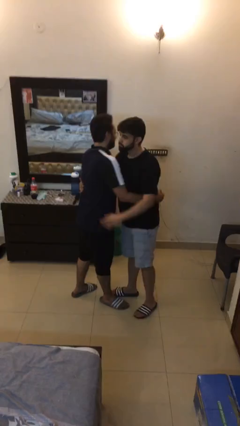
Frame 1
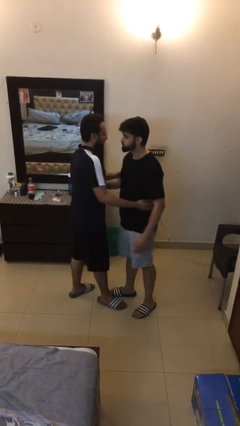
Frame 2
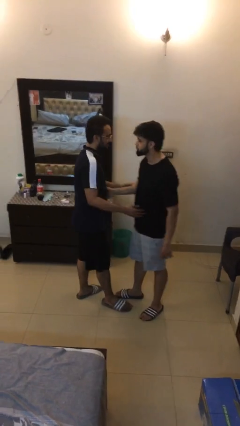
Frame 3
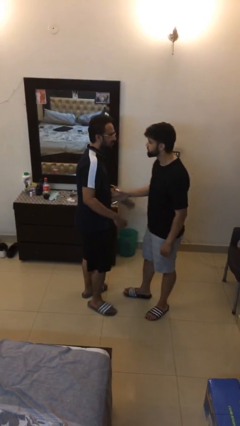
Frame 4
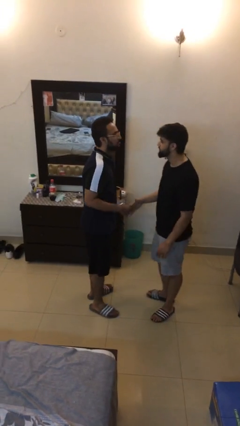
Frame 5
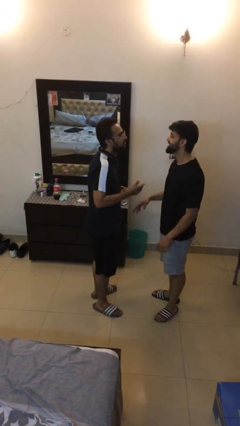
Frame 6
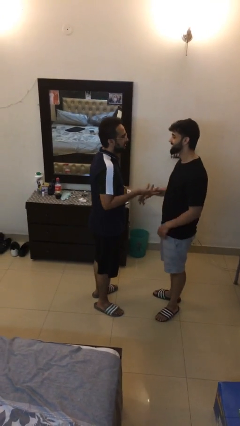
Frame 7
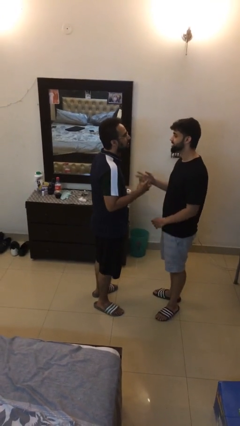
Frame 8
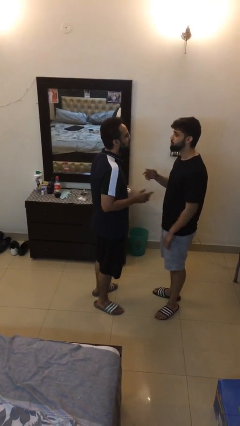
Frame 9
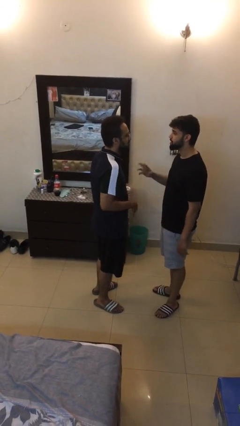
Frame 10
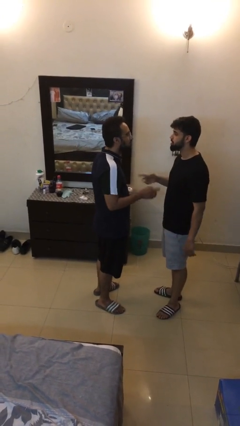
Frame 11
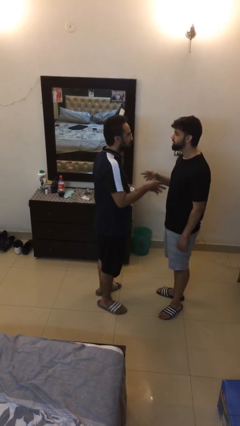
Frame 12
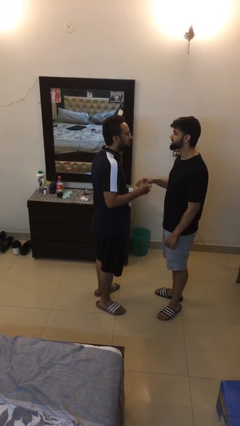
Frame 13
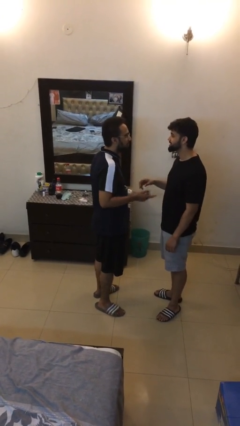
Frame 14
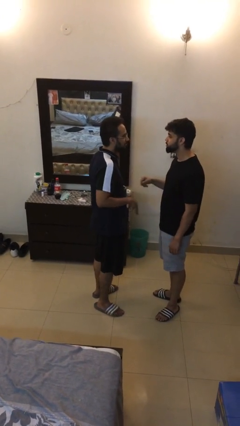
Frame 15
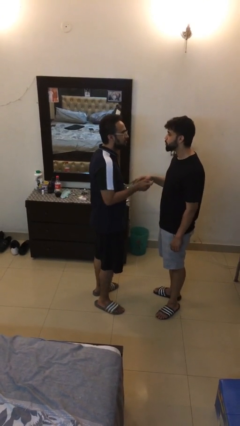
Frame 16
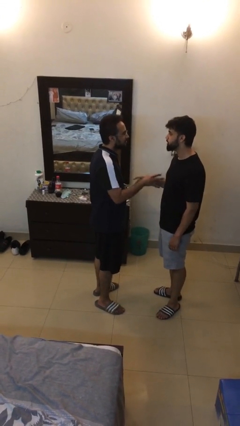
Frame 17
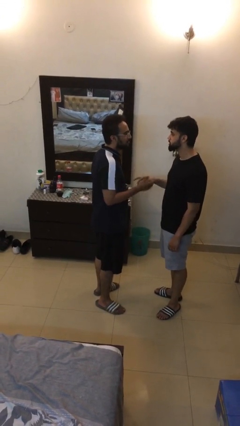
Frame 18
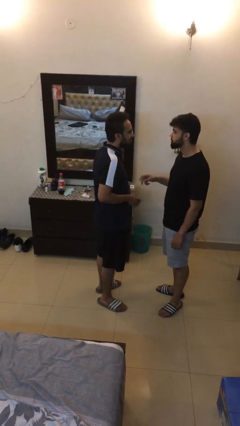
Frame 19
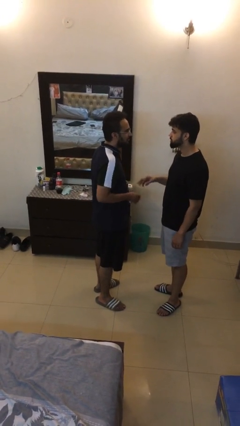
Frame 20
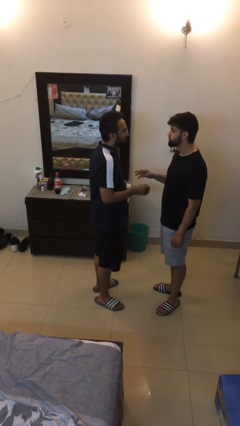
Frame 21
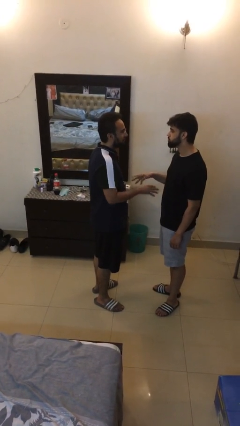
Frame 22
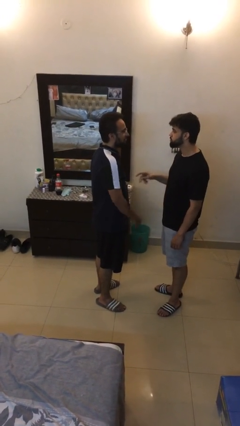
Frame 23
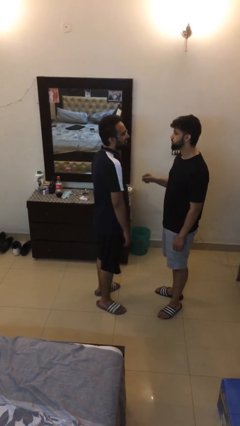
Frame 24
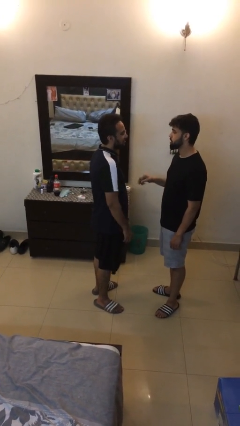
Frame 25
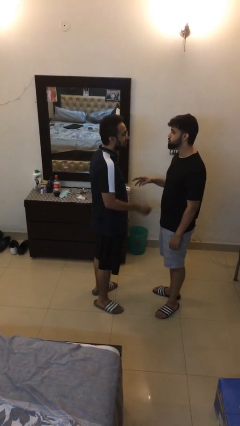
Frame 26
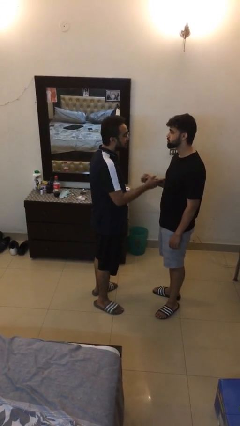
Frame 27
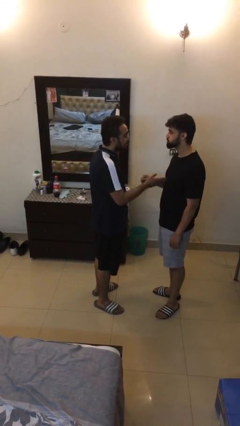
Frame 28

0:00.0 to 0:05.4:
person talks to person

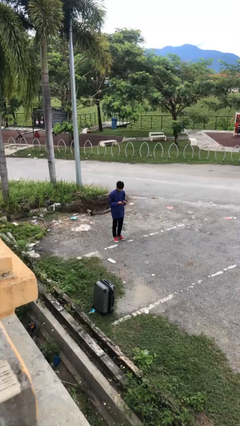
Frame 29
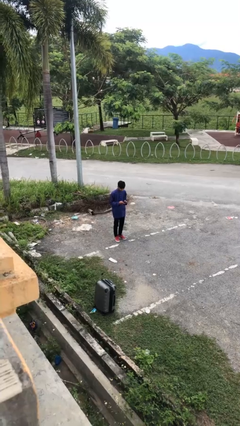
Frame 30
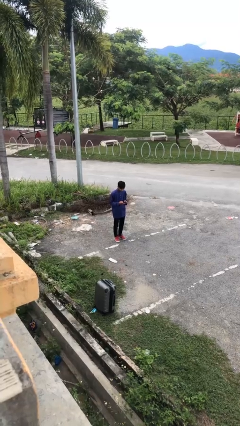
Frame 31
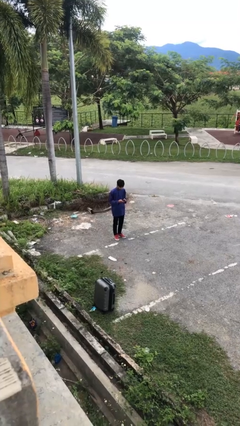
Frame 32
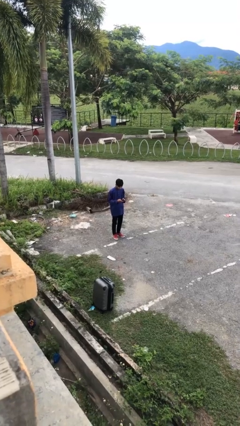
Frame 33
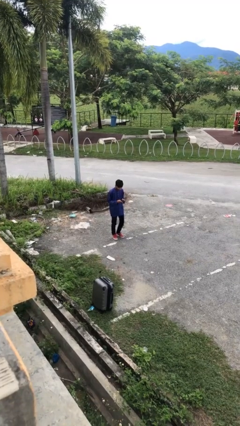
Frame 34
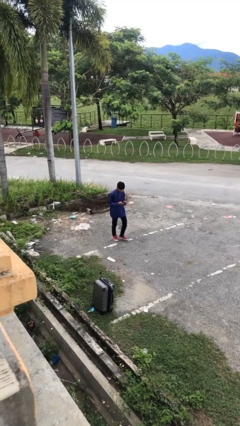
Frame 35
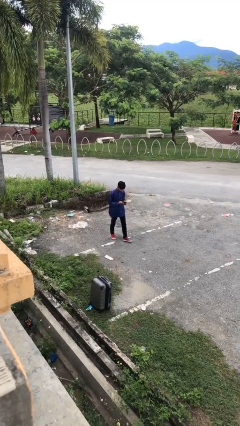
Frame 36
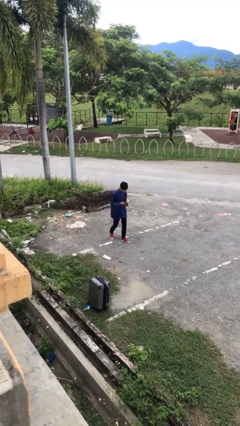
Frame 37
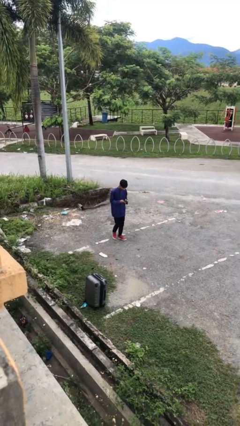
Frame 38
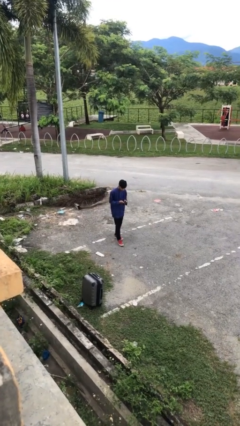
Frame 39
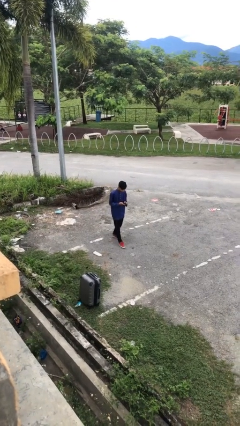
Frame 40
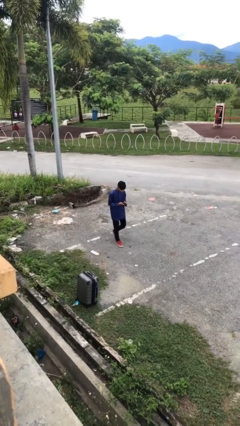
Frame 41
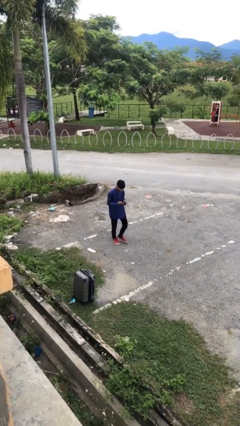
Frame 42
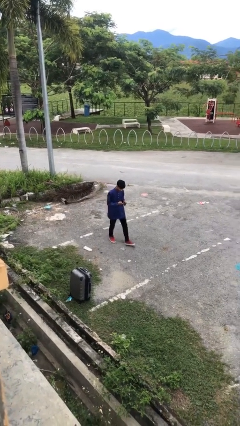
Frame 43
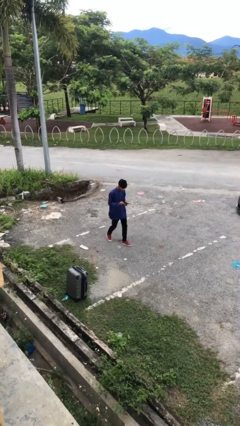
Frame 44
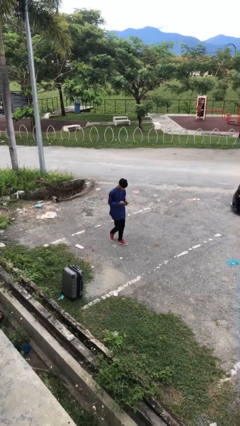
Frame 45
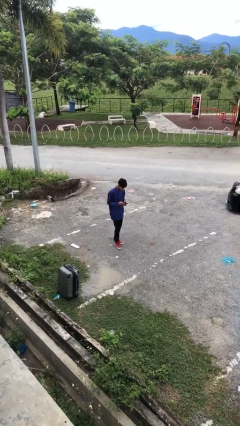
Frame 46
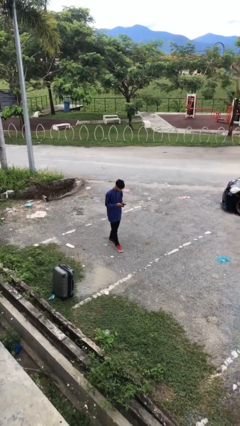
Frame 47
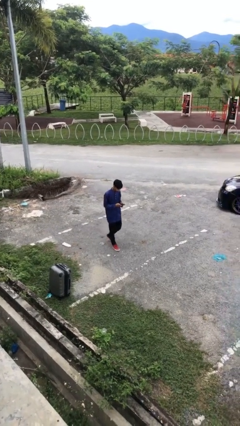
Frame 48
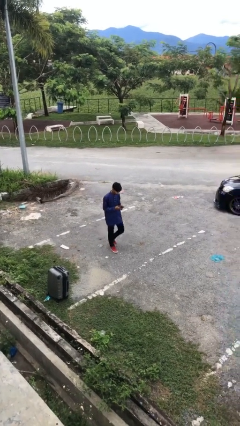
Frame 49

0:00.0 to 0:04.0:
person texts on phone

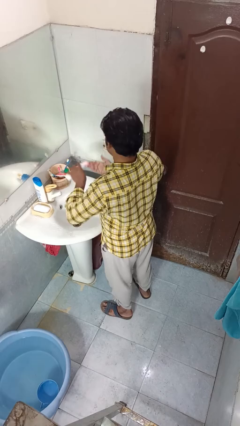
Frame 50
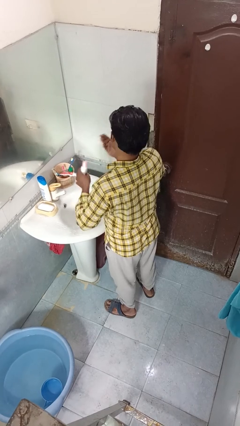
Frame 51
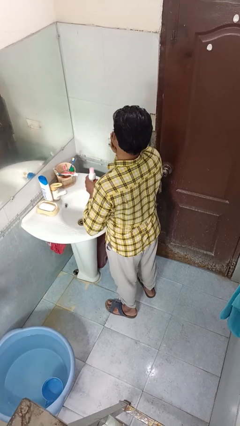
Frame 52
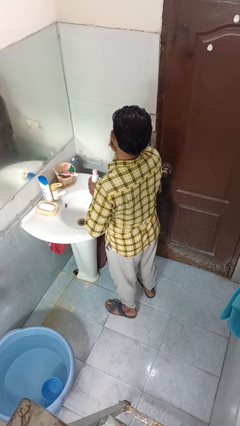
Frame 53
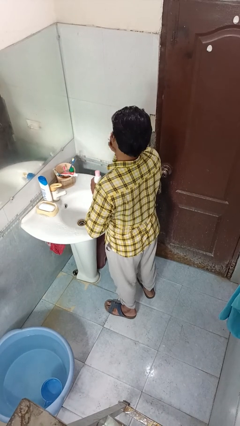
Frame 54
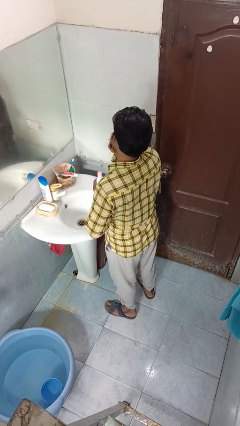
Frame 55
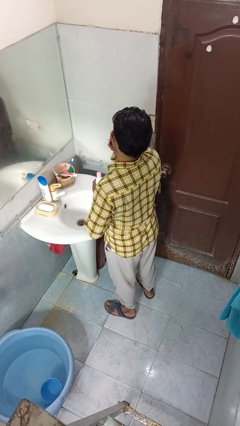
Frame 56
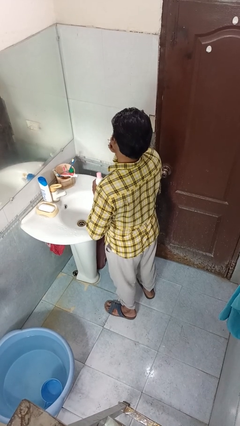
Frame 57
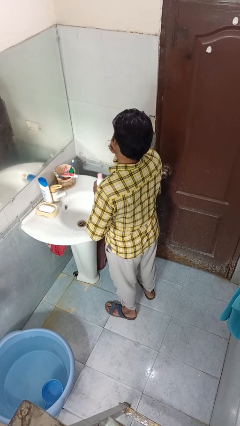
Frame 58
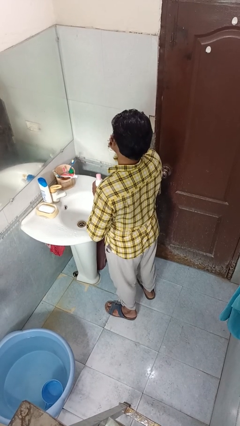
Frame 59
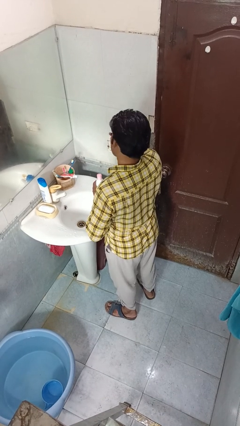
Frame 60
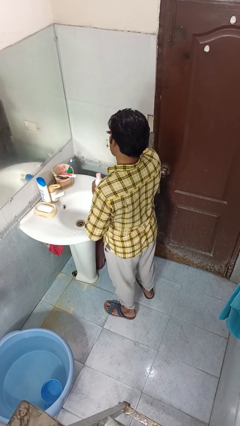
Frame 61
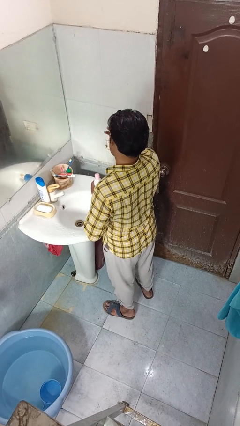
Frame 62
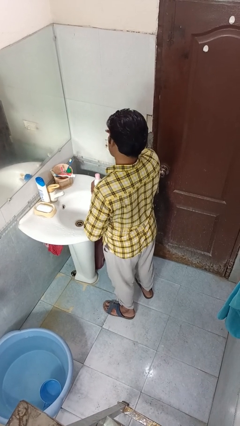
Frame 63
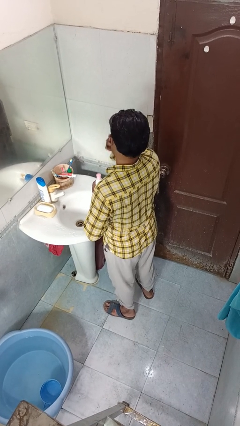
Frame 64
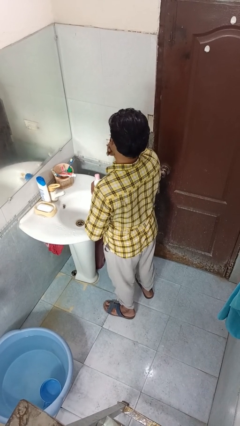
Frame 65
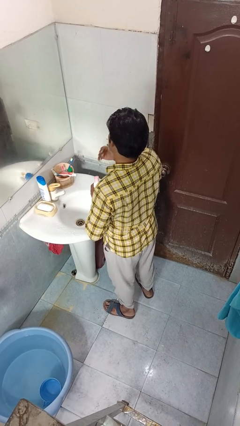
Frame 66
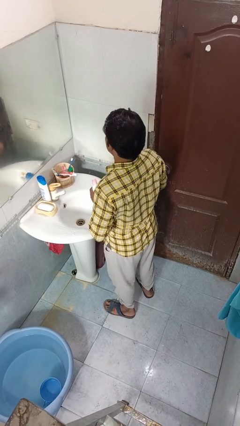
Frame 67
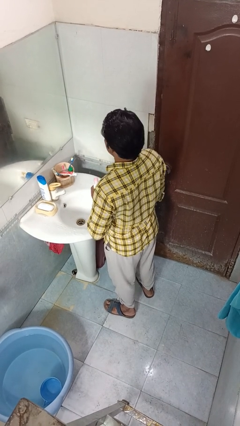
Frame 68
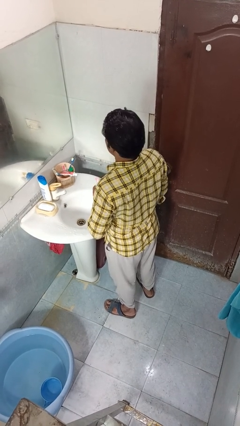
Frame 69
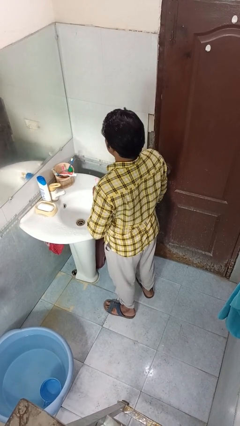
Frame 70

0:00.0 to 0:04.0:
person applies facial moisturizer

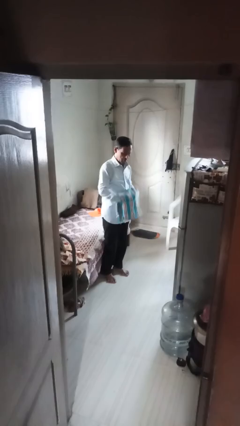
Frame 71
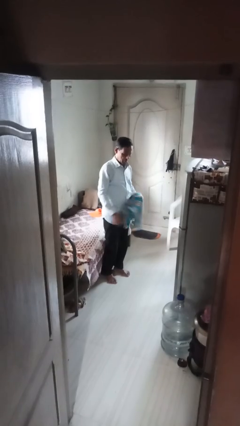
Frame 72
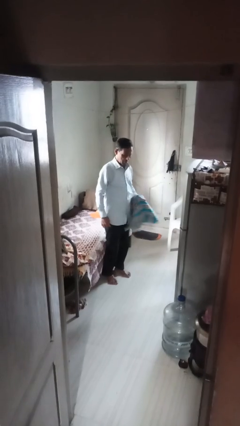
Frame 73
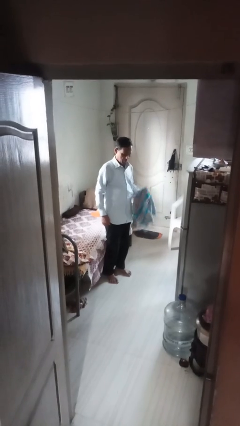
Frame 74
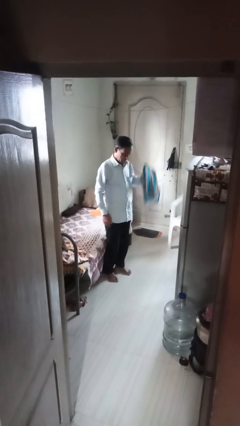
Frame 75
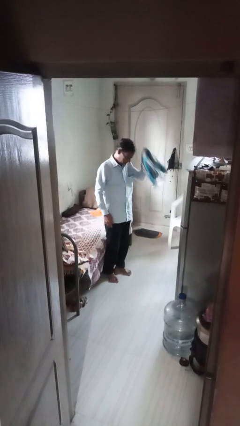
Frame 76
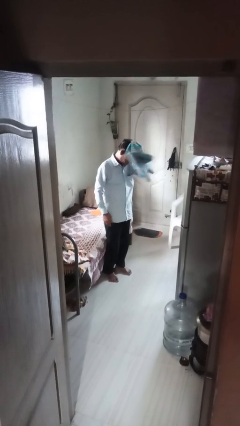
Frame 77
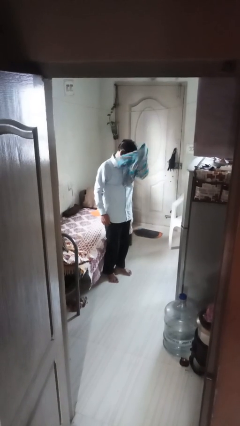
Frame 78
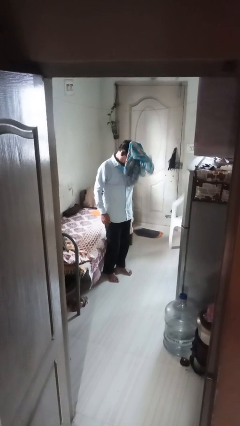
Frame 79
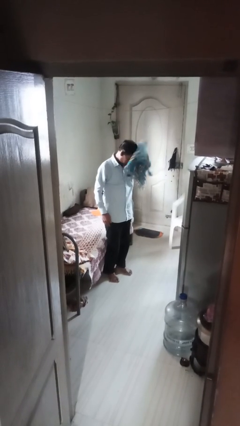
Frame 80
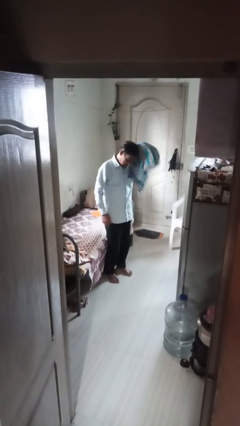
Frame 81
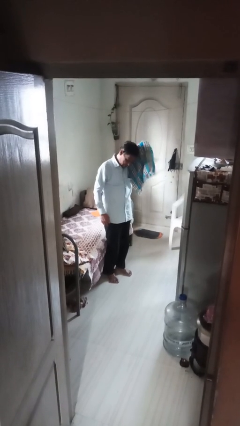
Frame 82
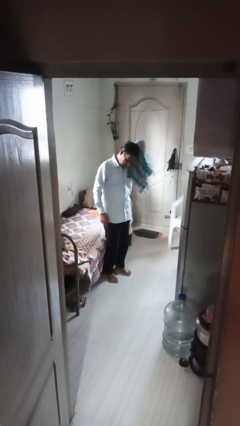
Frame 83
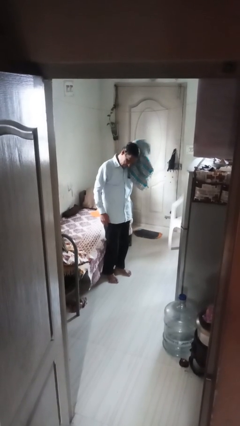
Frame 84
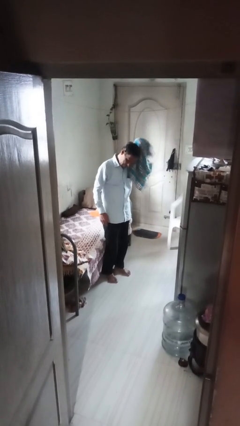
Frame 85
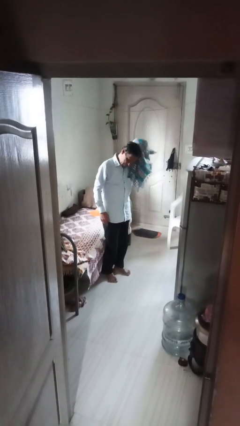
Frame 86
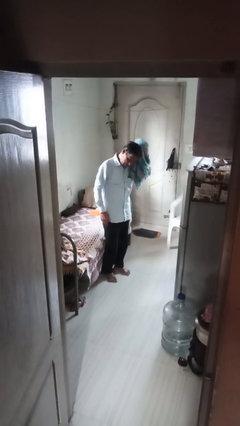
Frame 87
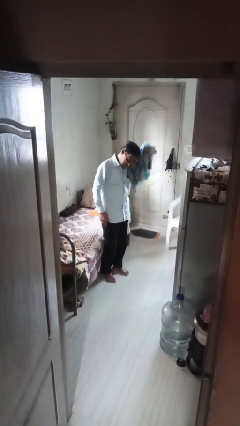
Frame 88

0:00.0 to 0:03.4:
person dries hair with towel

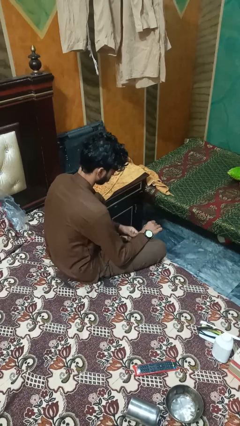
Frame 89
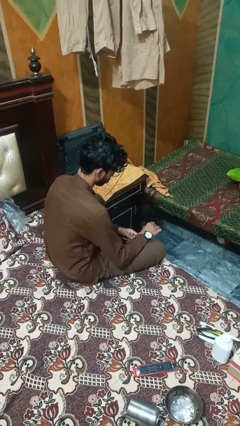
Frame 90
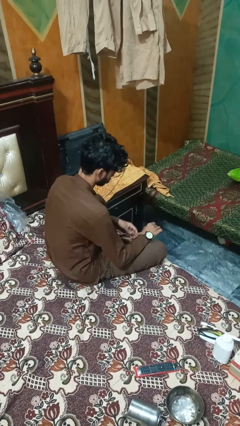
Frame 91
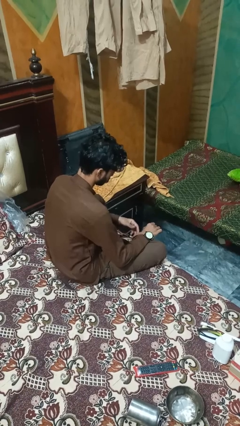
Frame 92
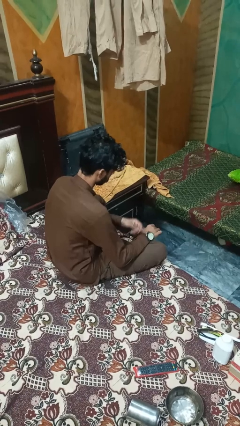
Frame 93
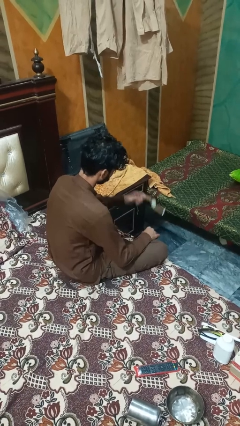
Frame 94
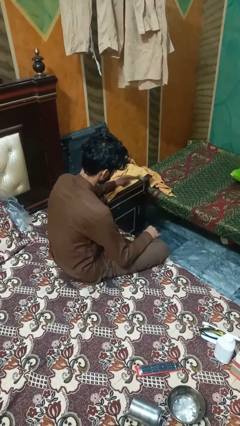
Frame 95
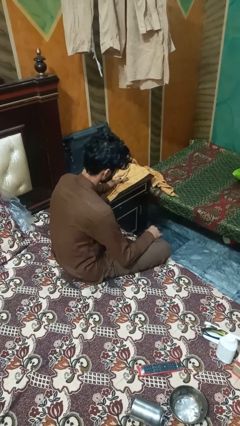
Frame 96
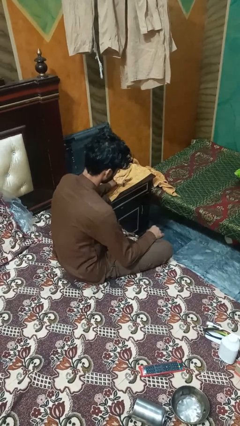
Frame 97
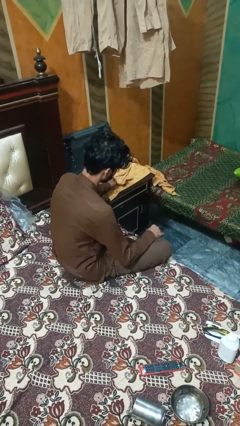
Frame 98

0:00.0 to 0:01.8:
person takes off wristwatch
